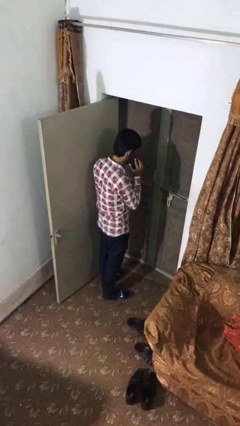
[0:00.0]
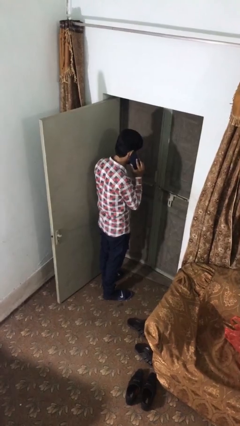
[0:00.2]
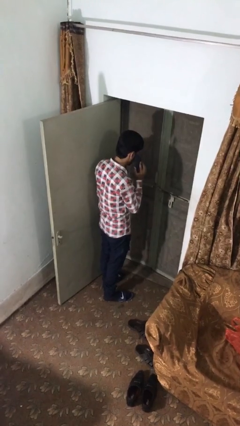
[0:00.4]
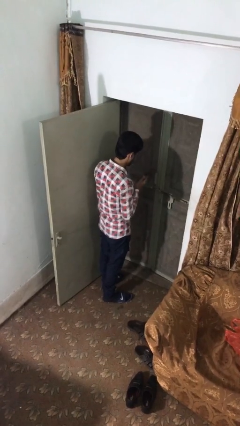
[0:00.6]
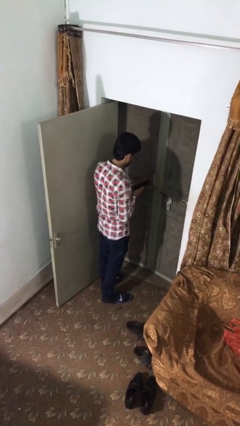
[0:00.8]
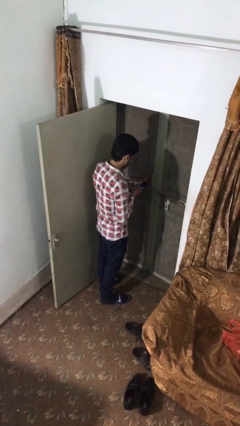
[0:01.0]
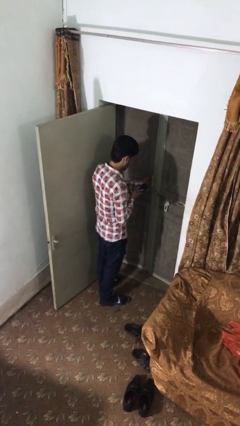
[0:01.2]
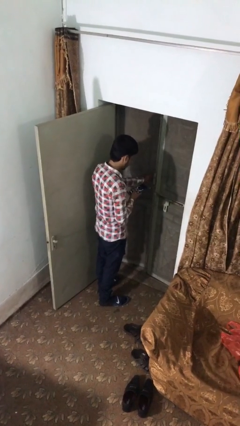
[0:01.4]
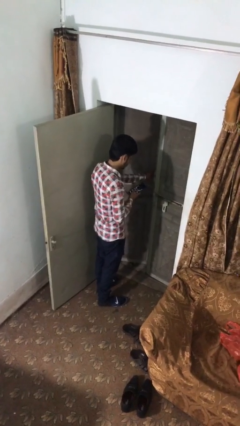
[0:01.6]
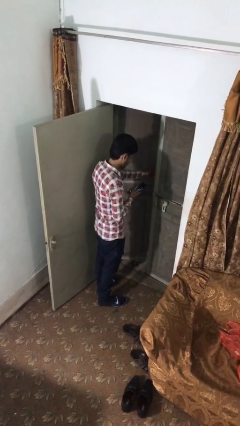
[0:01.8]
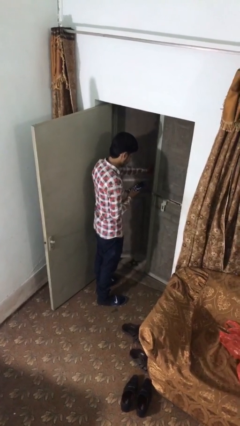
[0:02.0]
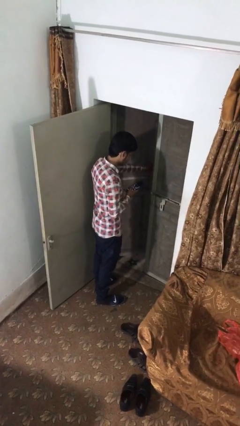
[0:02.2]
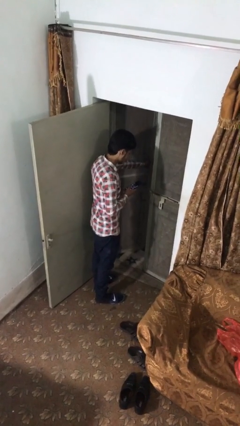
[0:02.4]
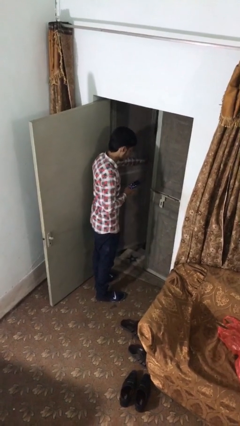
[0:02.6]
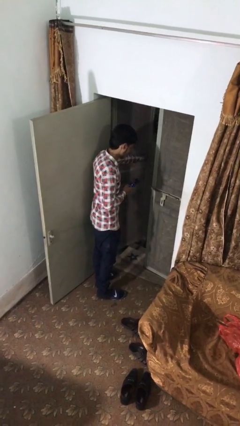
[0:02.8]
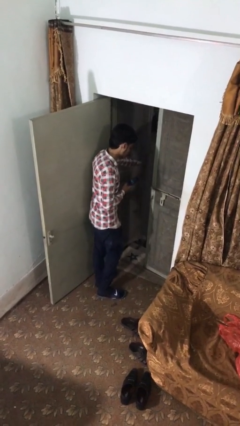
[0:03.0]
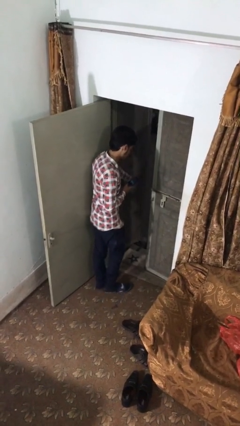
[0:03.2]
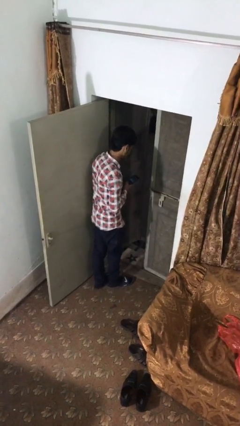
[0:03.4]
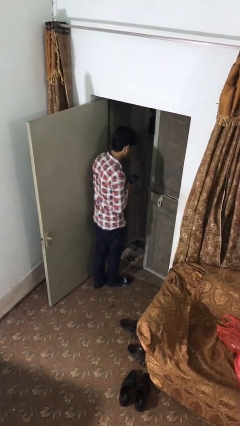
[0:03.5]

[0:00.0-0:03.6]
person opens facility door

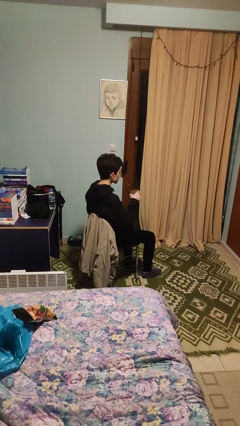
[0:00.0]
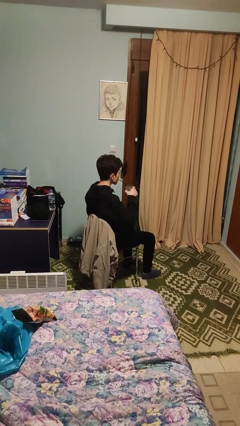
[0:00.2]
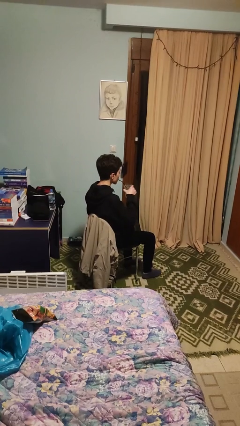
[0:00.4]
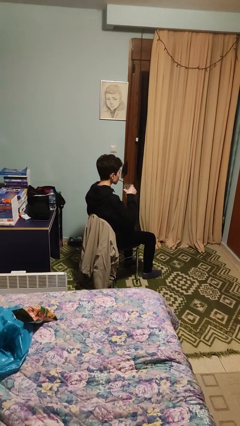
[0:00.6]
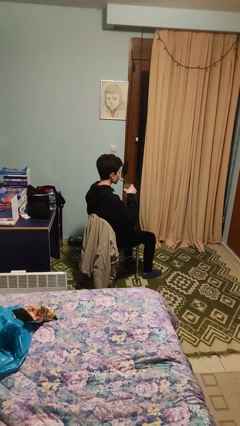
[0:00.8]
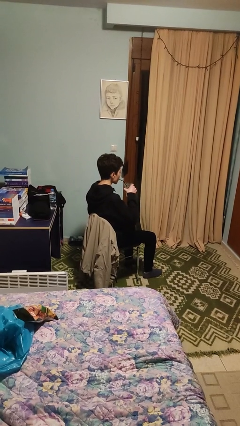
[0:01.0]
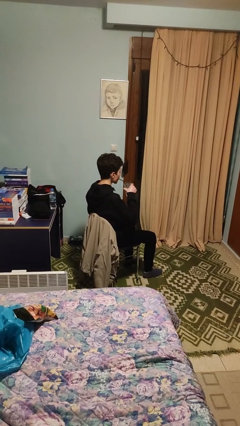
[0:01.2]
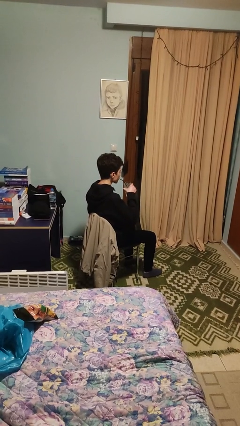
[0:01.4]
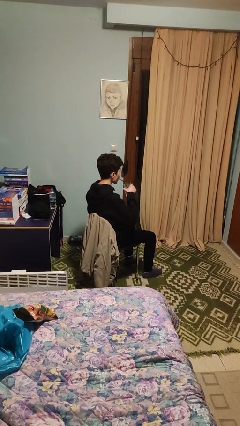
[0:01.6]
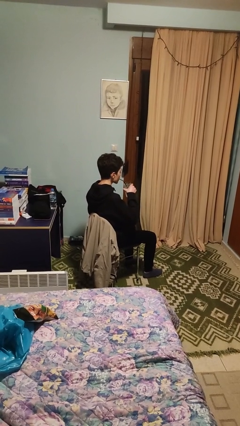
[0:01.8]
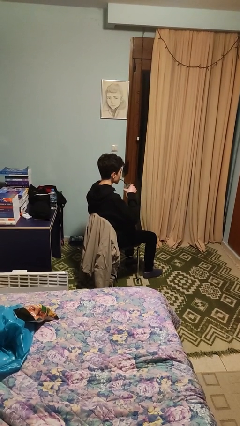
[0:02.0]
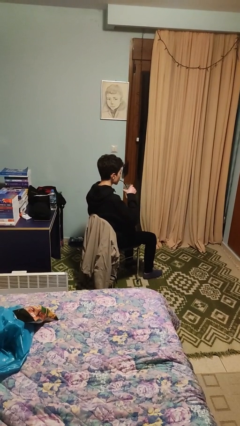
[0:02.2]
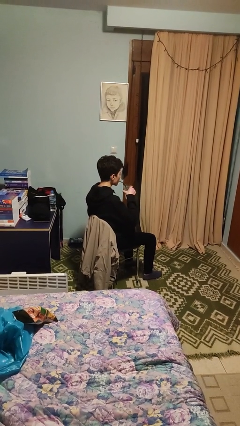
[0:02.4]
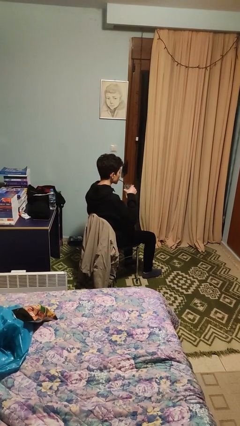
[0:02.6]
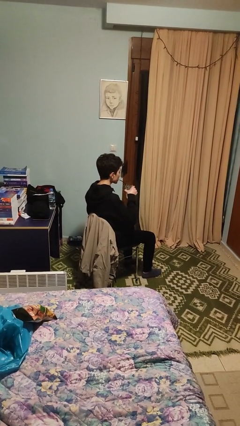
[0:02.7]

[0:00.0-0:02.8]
person drinks from straw

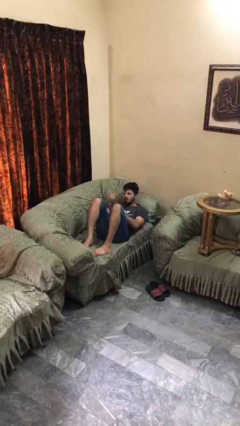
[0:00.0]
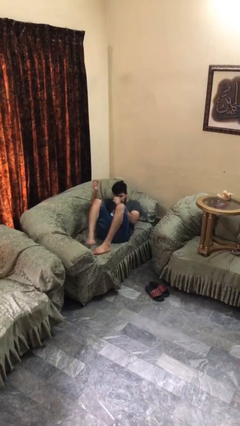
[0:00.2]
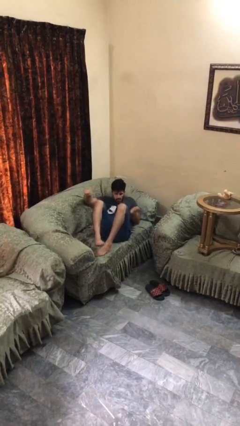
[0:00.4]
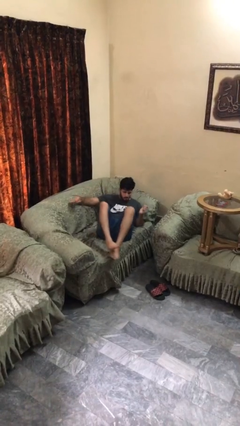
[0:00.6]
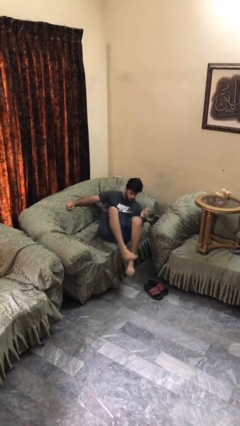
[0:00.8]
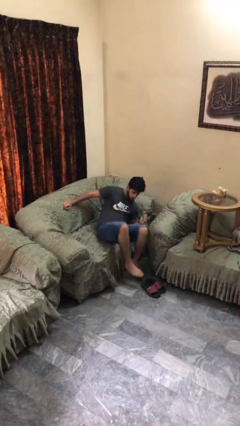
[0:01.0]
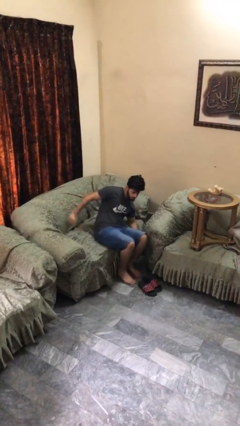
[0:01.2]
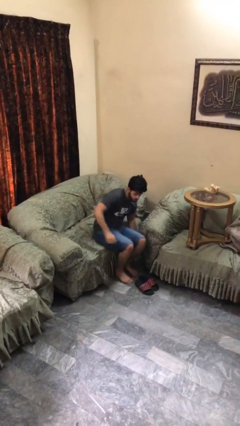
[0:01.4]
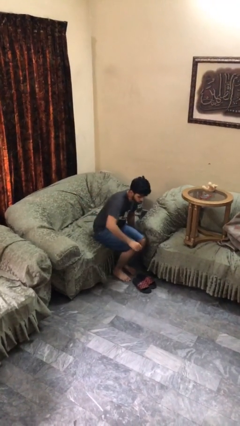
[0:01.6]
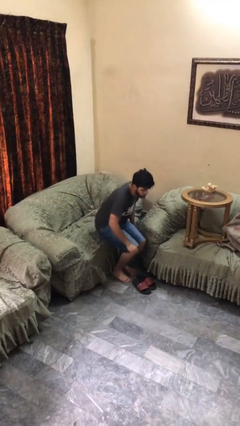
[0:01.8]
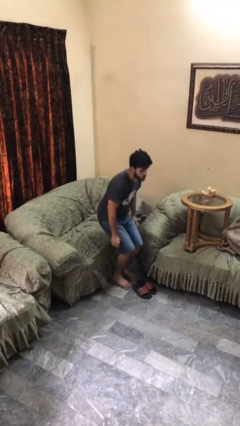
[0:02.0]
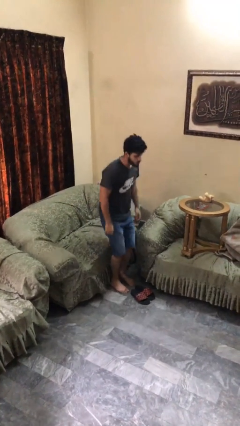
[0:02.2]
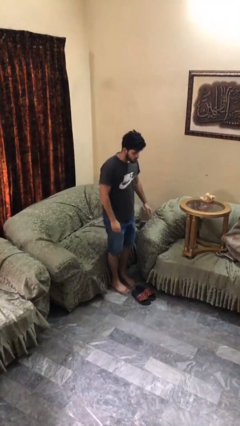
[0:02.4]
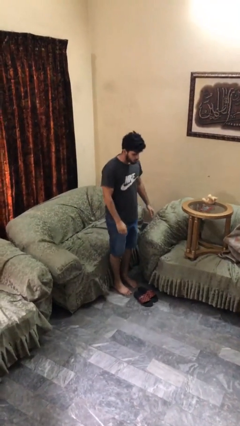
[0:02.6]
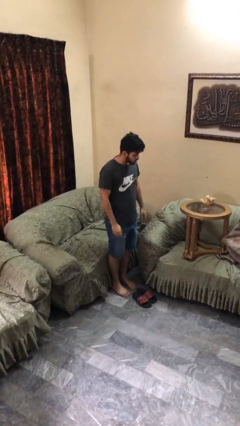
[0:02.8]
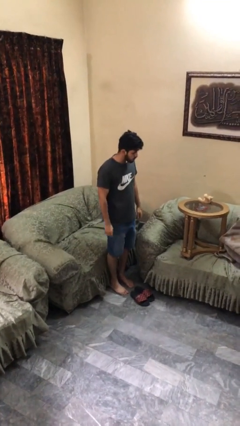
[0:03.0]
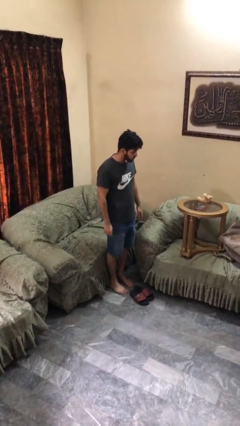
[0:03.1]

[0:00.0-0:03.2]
person stands up

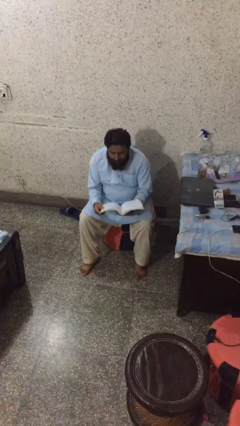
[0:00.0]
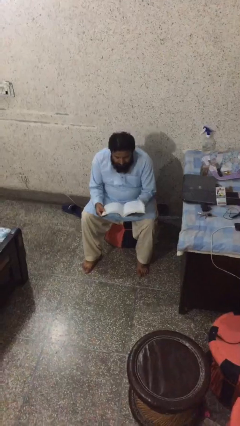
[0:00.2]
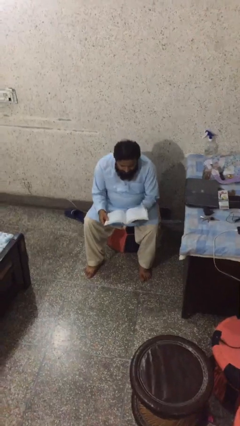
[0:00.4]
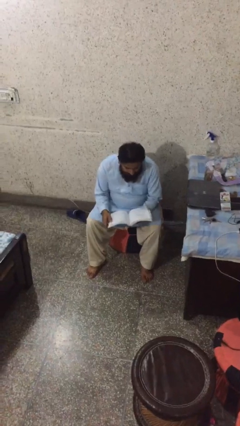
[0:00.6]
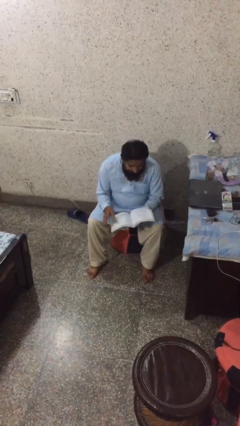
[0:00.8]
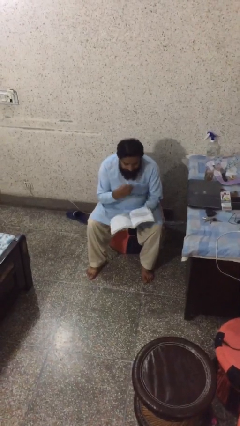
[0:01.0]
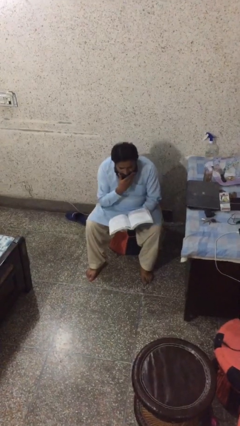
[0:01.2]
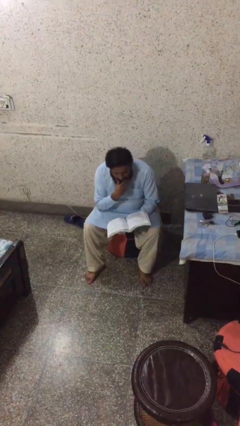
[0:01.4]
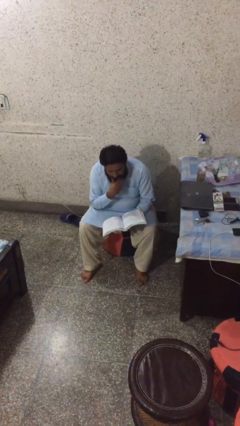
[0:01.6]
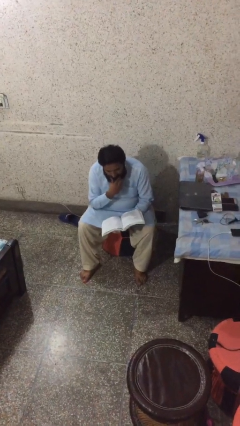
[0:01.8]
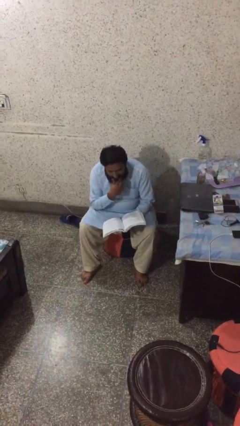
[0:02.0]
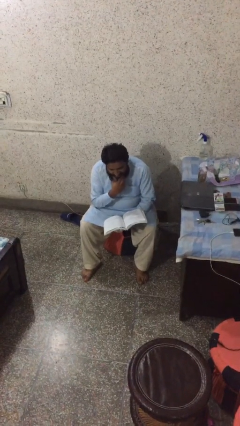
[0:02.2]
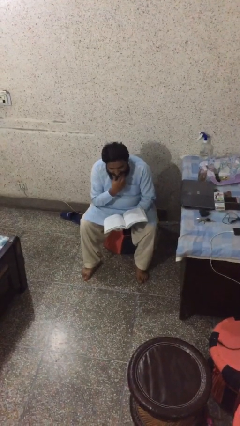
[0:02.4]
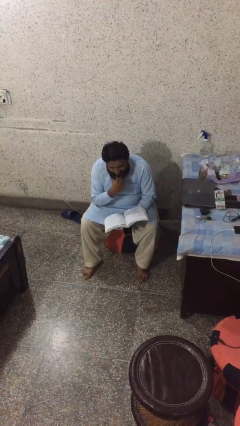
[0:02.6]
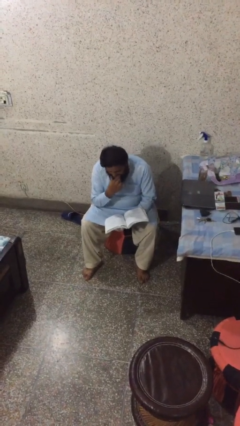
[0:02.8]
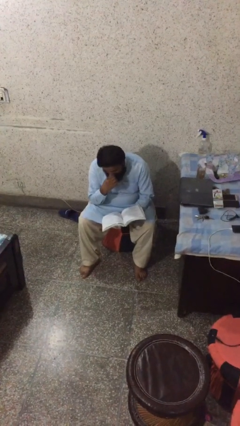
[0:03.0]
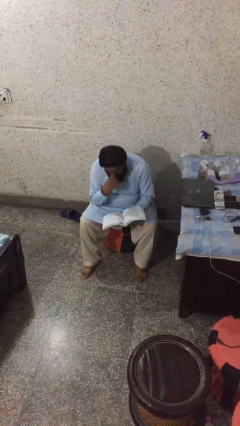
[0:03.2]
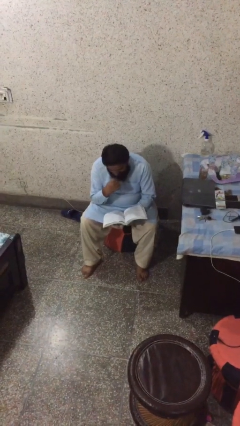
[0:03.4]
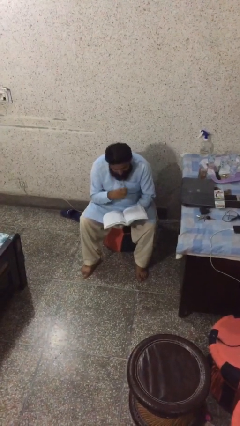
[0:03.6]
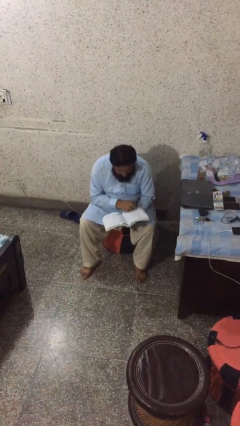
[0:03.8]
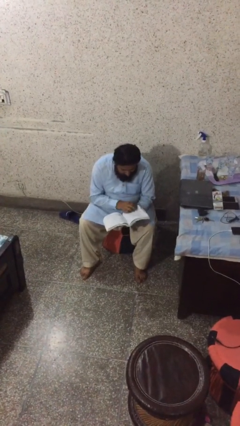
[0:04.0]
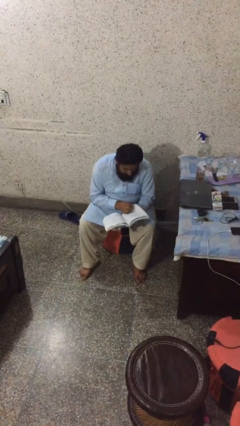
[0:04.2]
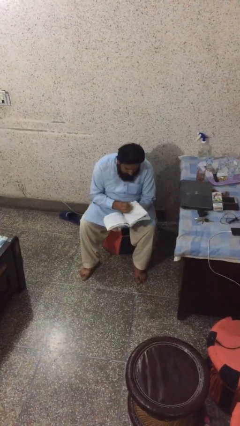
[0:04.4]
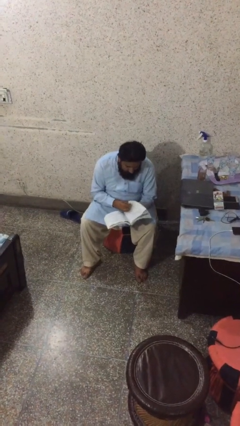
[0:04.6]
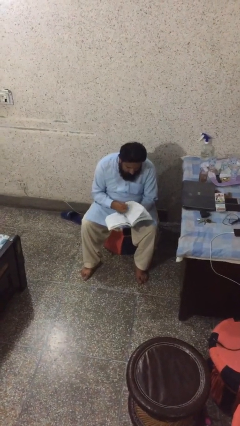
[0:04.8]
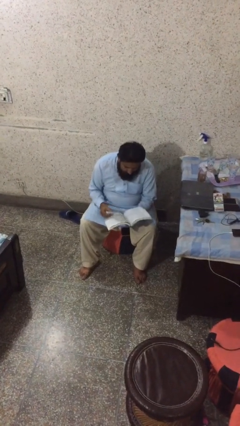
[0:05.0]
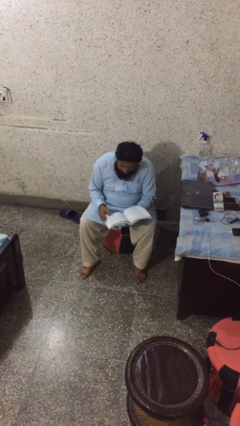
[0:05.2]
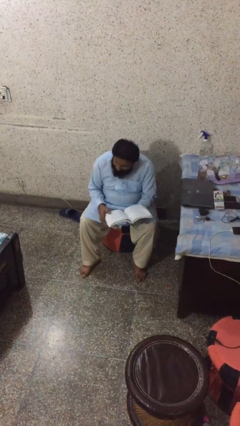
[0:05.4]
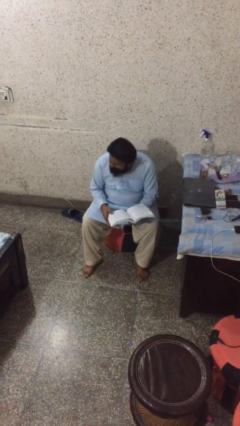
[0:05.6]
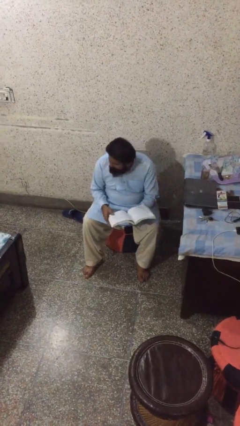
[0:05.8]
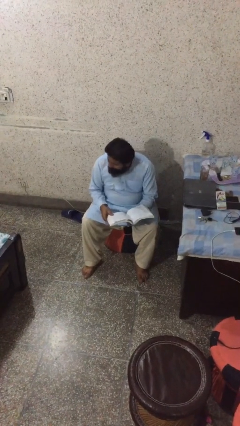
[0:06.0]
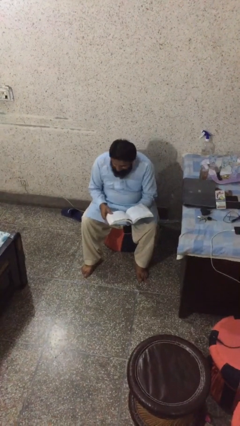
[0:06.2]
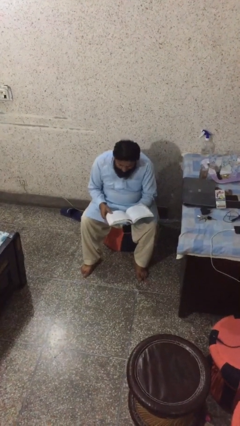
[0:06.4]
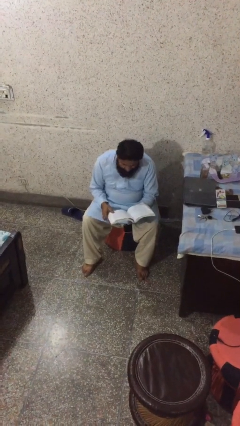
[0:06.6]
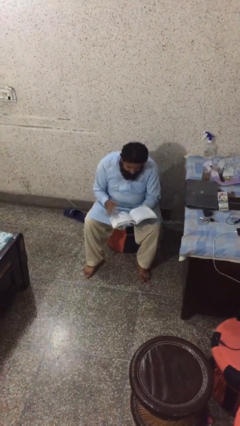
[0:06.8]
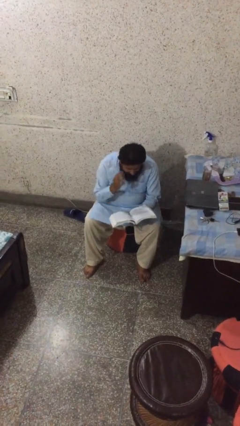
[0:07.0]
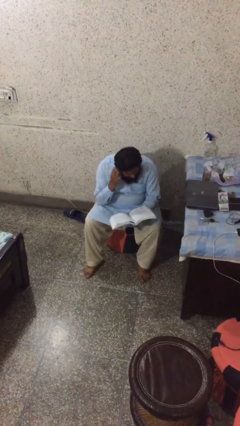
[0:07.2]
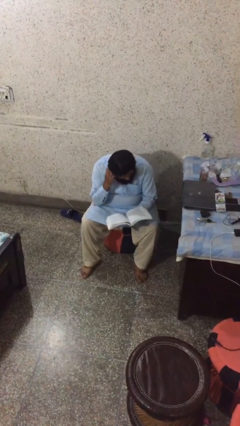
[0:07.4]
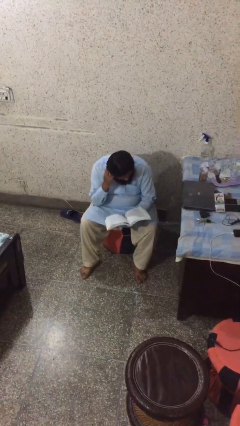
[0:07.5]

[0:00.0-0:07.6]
person reads document

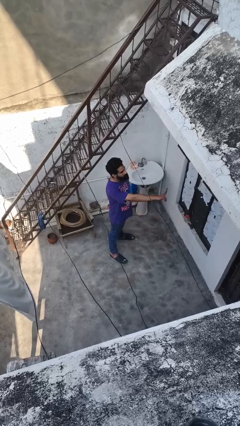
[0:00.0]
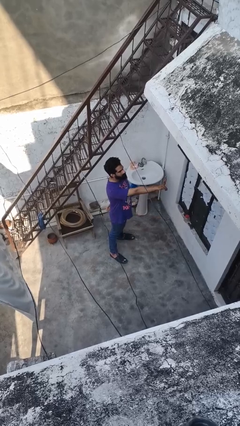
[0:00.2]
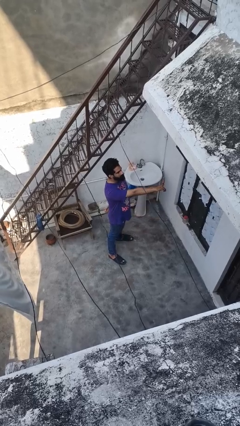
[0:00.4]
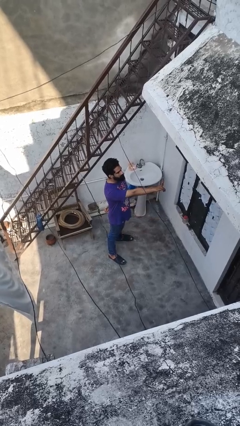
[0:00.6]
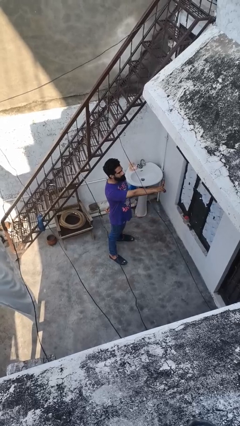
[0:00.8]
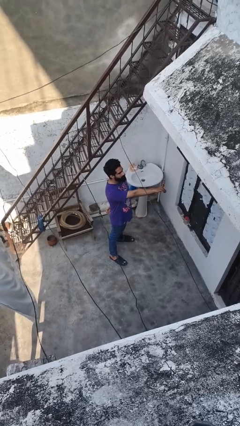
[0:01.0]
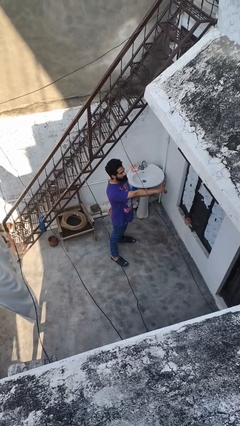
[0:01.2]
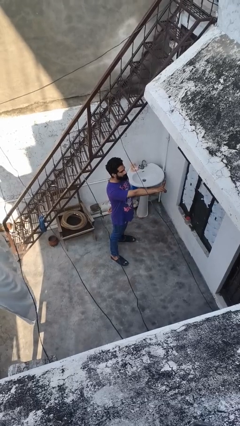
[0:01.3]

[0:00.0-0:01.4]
person gestures peace
